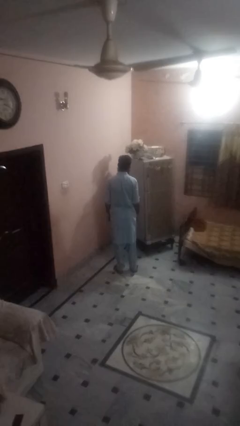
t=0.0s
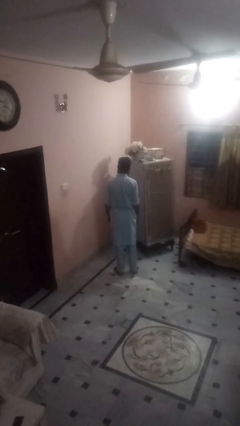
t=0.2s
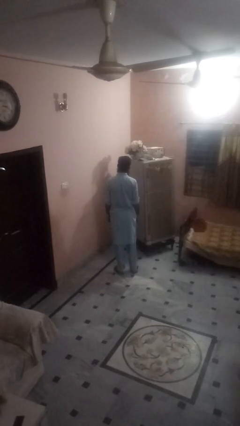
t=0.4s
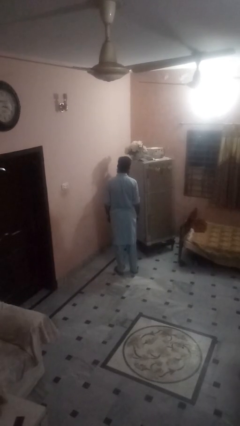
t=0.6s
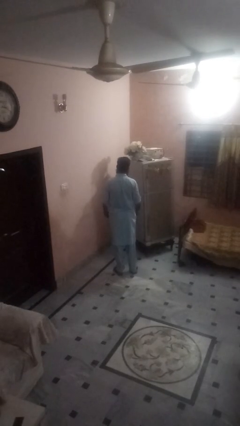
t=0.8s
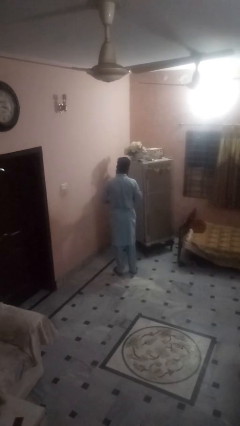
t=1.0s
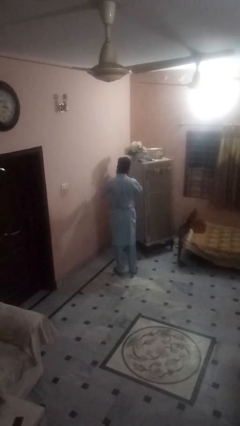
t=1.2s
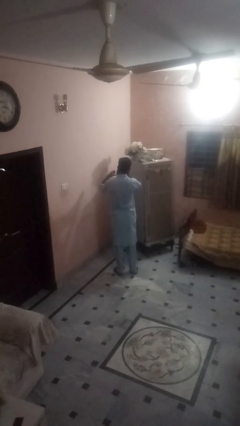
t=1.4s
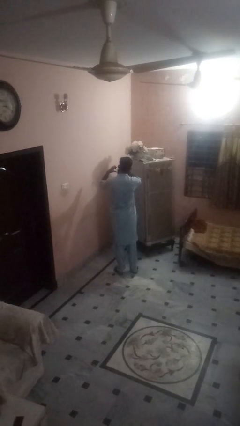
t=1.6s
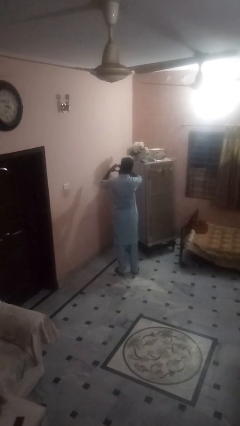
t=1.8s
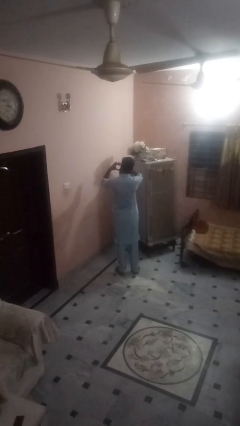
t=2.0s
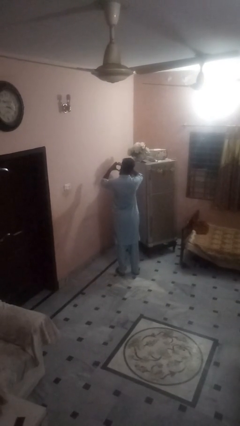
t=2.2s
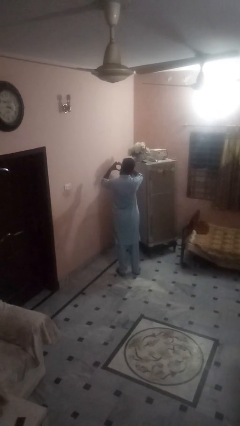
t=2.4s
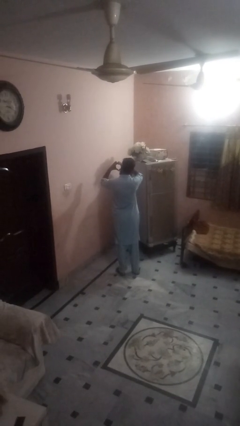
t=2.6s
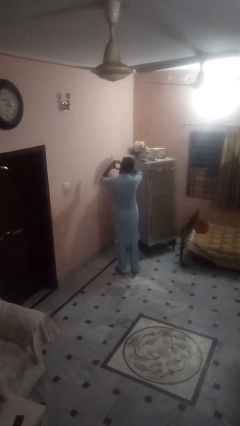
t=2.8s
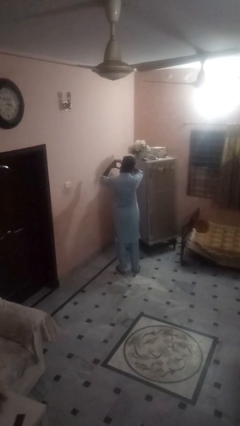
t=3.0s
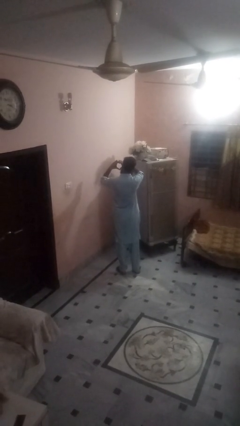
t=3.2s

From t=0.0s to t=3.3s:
person gestures heart

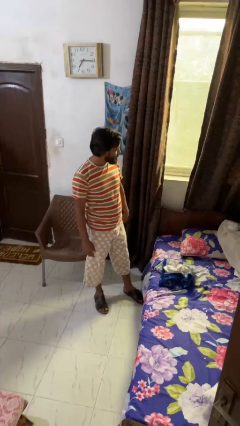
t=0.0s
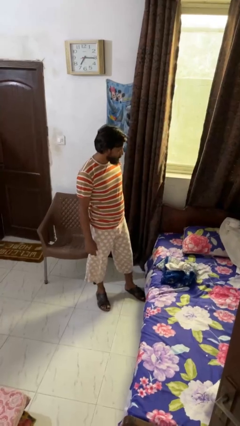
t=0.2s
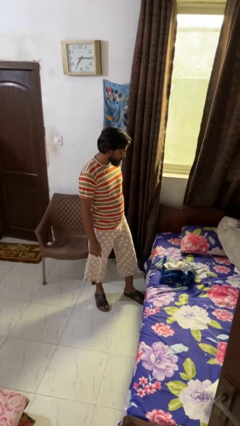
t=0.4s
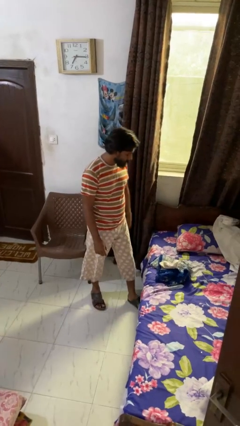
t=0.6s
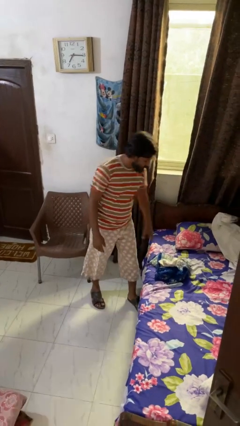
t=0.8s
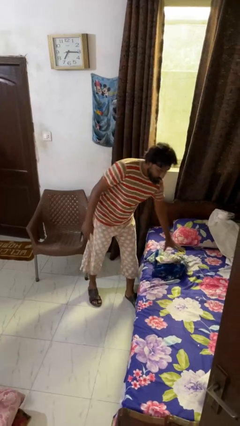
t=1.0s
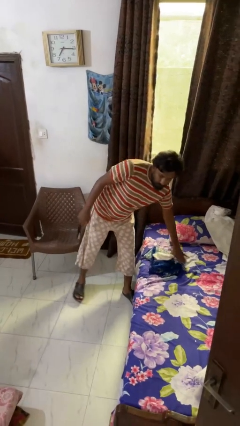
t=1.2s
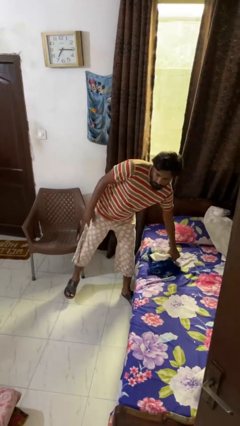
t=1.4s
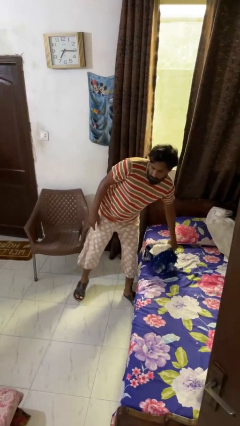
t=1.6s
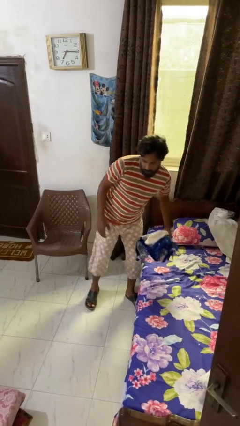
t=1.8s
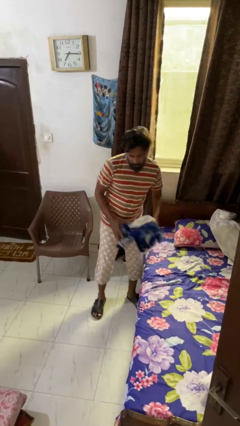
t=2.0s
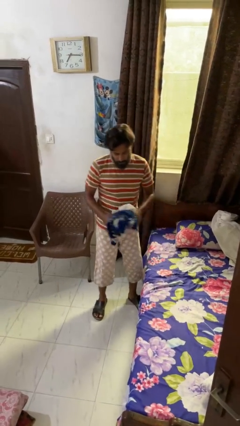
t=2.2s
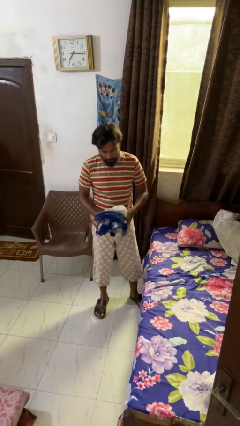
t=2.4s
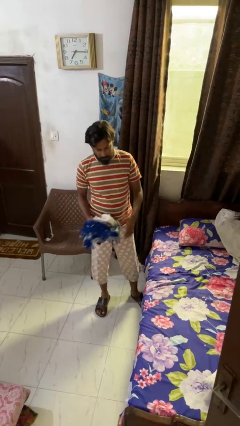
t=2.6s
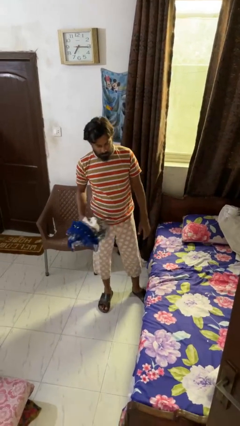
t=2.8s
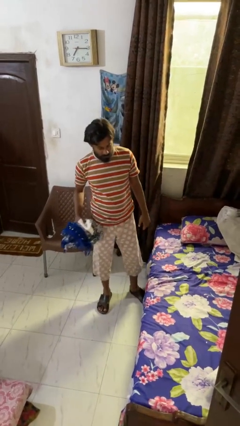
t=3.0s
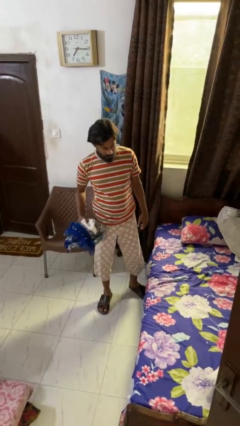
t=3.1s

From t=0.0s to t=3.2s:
person picks up object from bed

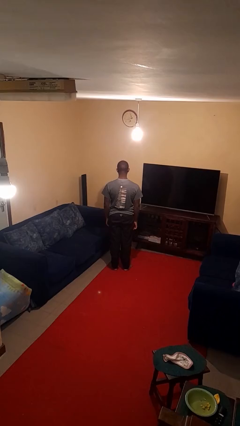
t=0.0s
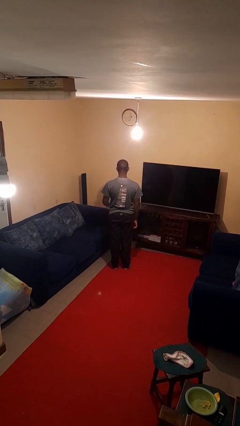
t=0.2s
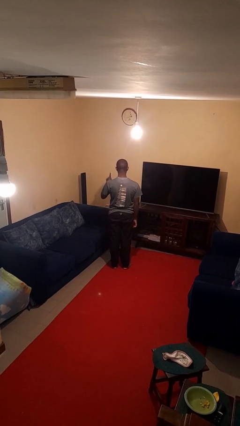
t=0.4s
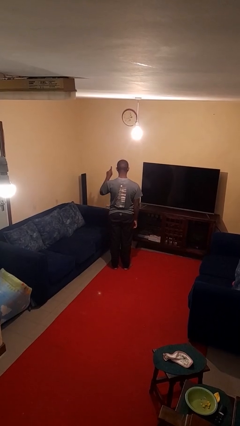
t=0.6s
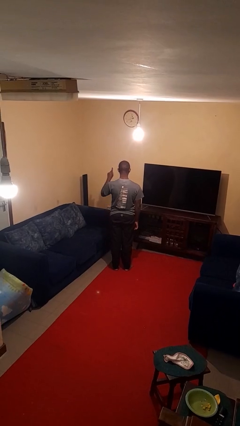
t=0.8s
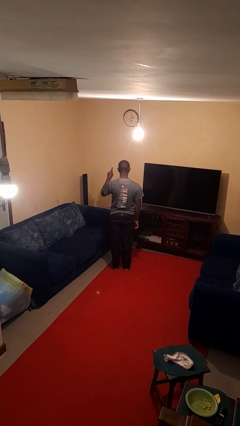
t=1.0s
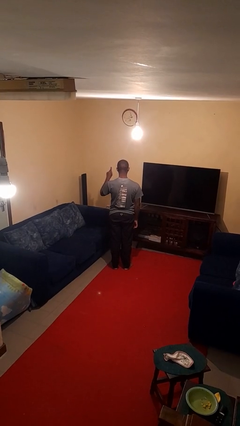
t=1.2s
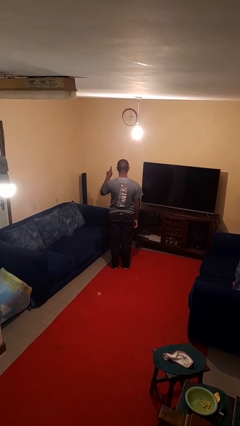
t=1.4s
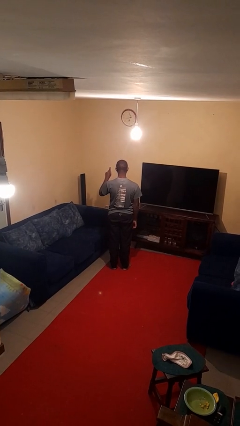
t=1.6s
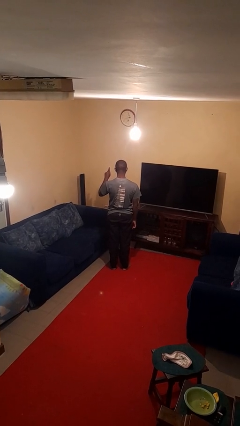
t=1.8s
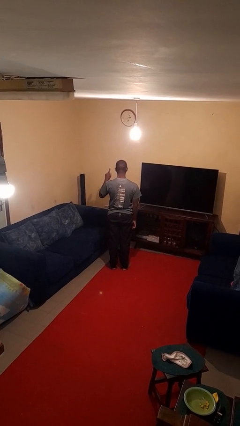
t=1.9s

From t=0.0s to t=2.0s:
person gestures number one

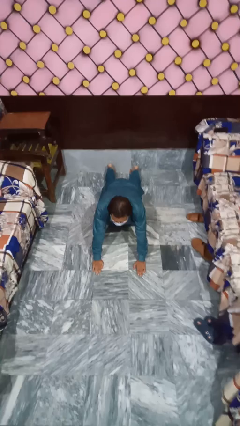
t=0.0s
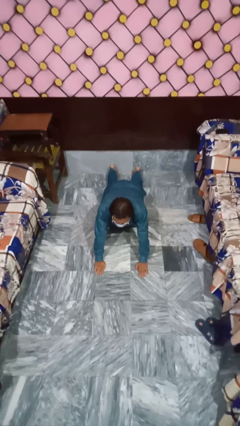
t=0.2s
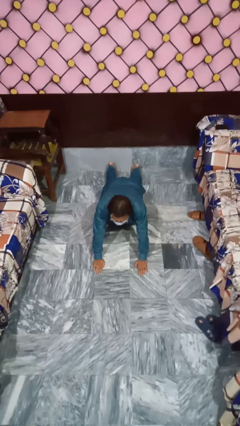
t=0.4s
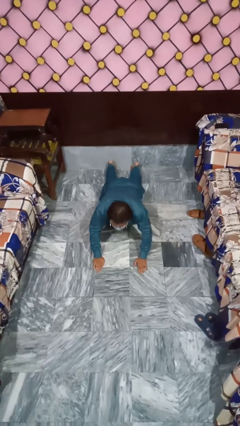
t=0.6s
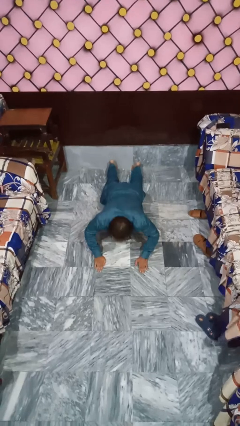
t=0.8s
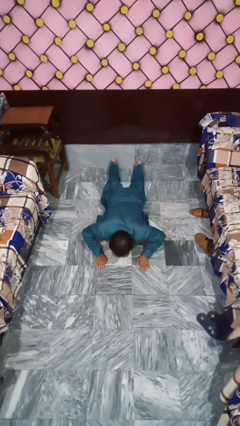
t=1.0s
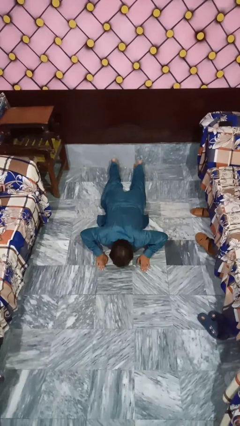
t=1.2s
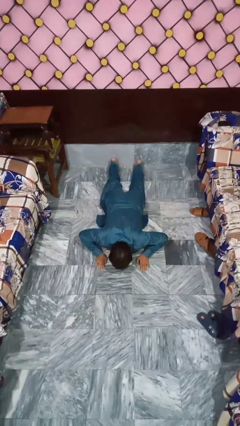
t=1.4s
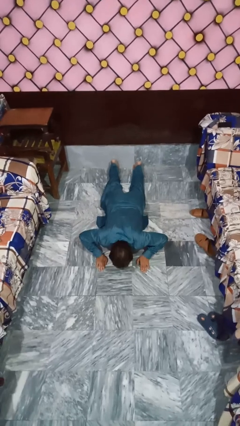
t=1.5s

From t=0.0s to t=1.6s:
person exercises with pushup

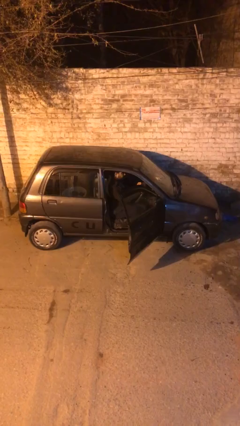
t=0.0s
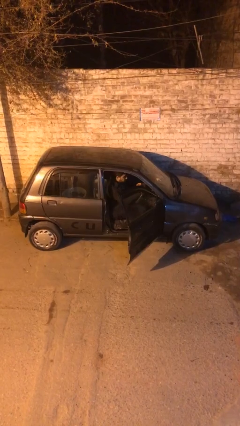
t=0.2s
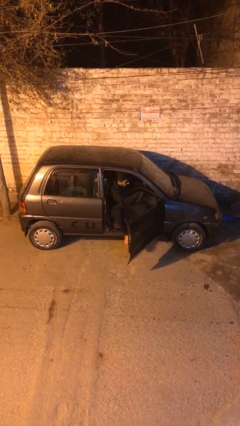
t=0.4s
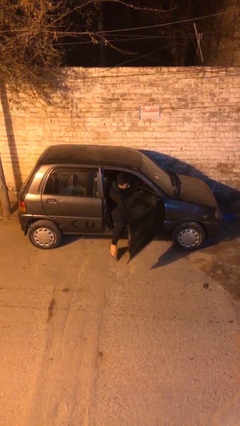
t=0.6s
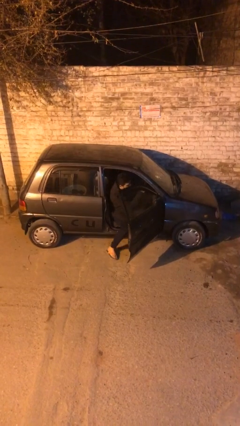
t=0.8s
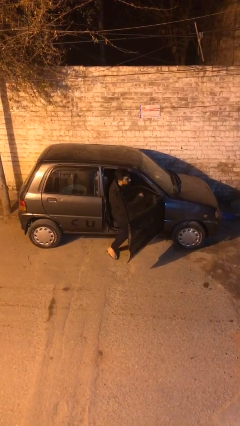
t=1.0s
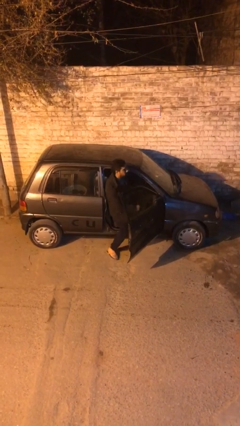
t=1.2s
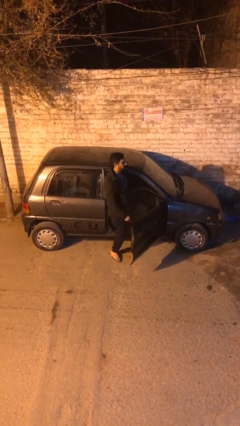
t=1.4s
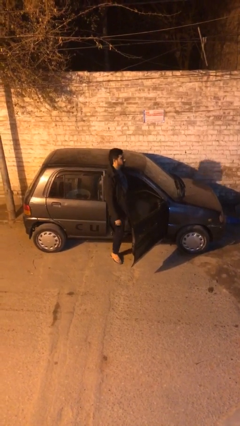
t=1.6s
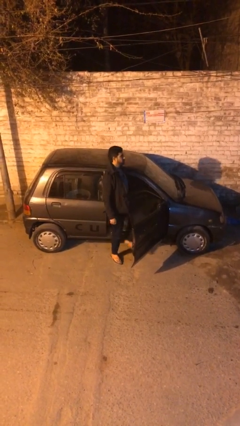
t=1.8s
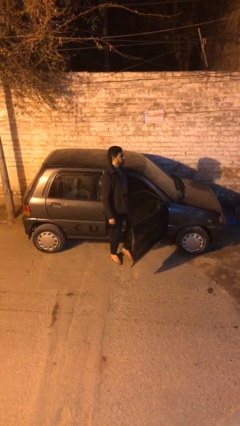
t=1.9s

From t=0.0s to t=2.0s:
person exits car

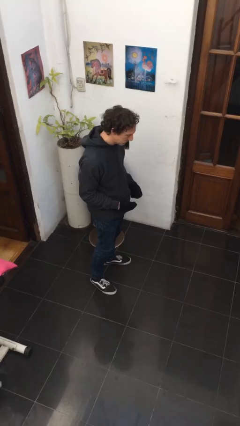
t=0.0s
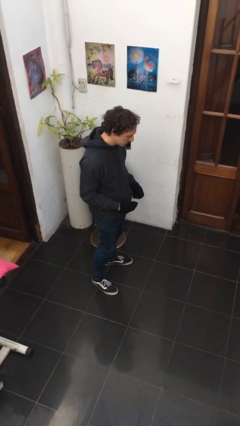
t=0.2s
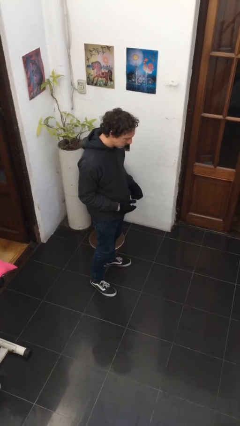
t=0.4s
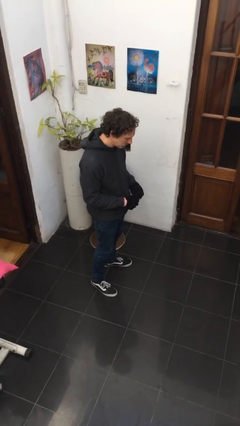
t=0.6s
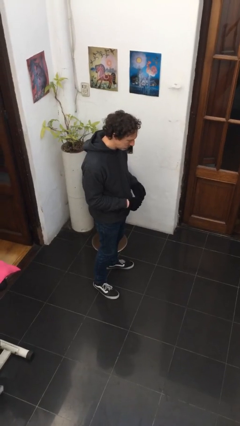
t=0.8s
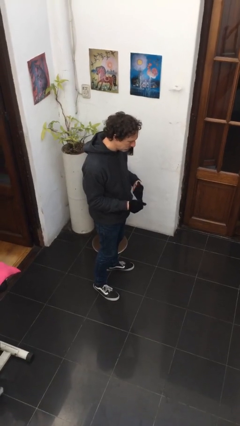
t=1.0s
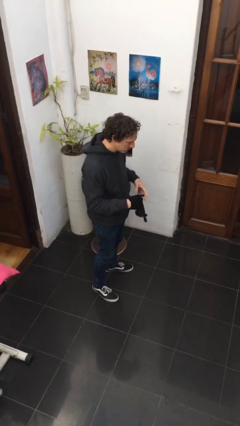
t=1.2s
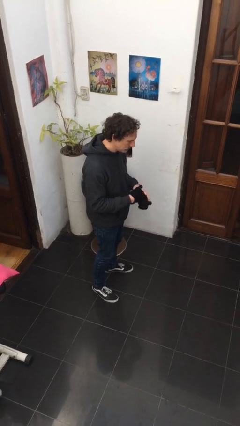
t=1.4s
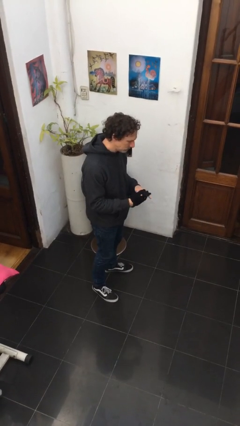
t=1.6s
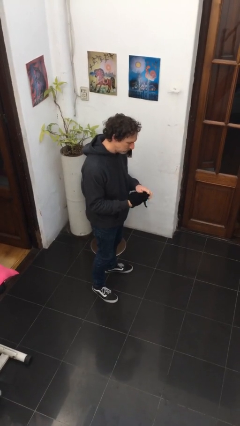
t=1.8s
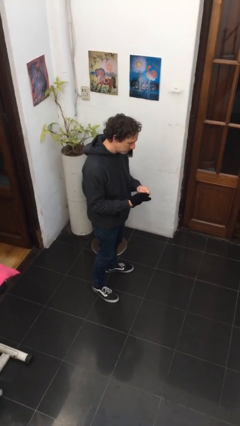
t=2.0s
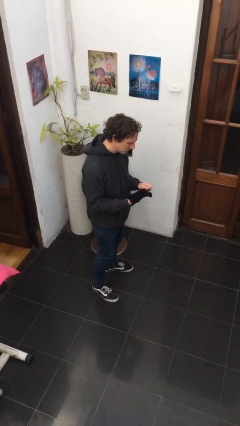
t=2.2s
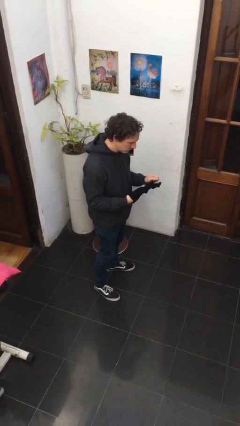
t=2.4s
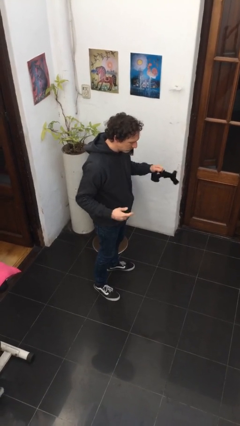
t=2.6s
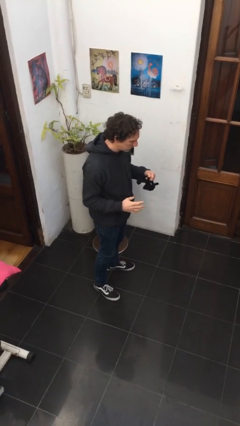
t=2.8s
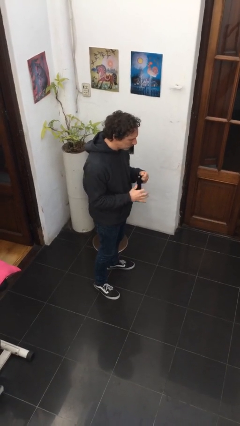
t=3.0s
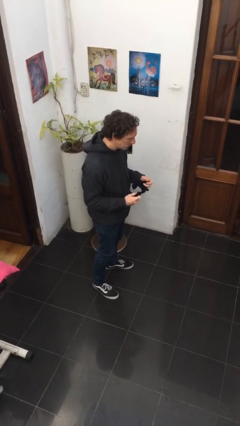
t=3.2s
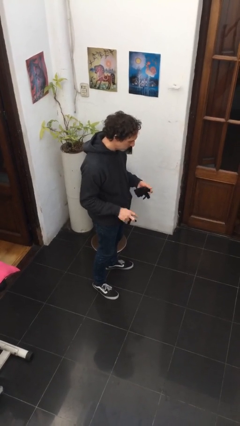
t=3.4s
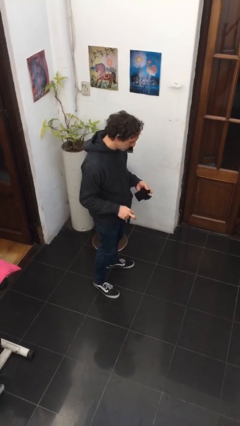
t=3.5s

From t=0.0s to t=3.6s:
person takes off gloves

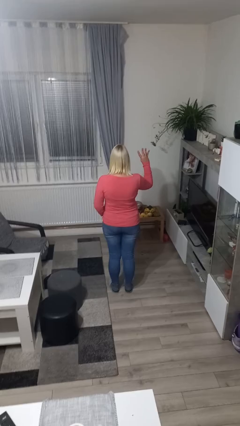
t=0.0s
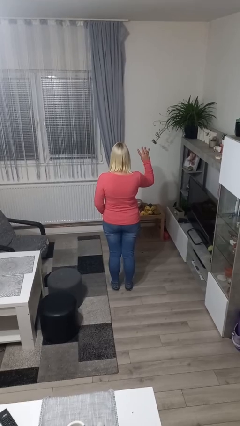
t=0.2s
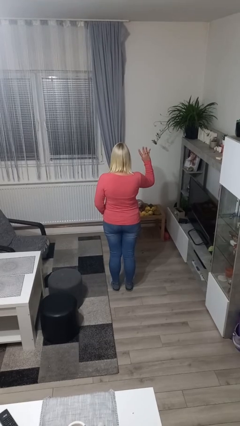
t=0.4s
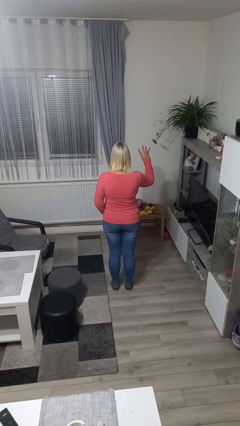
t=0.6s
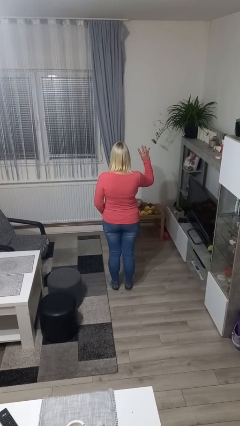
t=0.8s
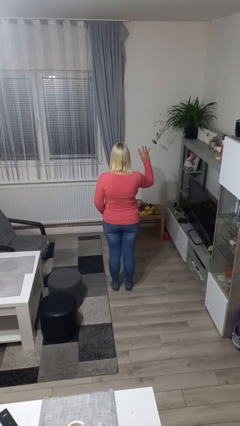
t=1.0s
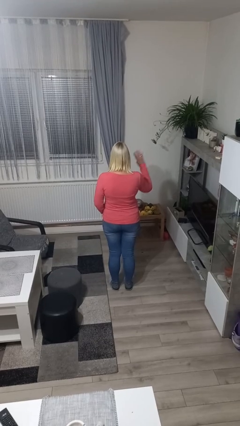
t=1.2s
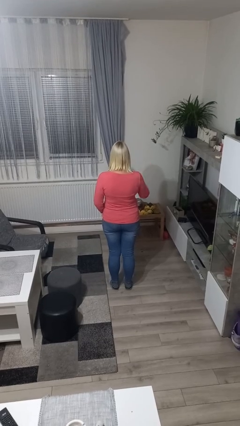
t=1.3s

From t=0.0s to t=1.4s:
person gestures number four

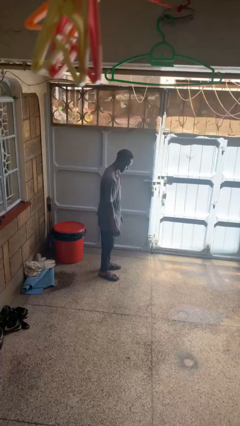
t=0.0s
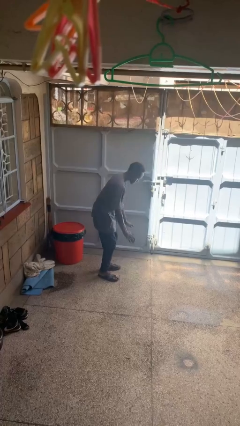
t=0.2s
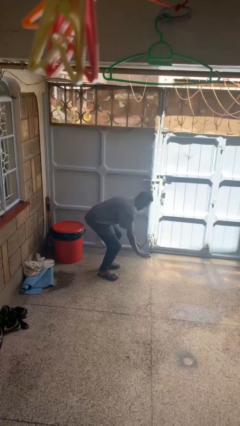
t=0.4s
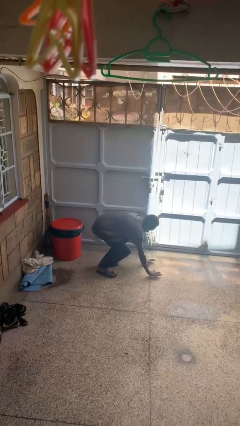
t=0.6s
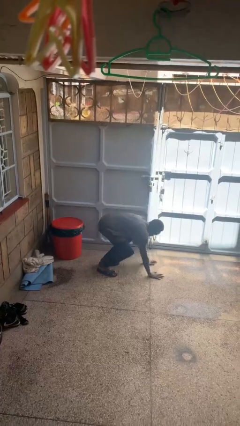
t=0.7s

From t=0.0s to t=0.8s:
person handstand
